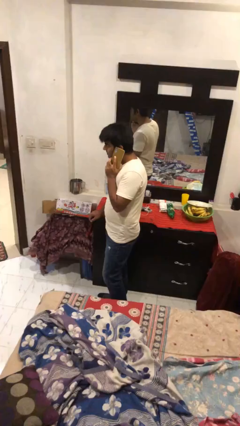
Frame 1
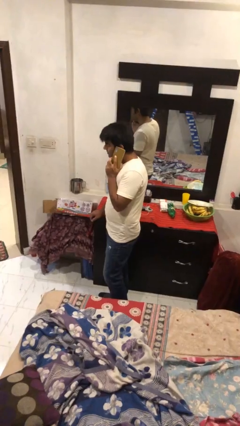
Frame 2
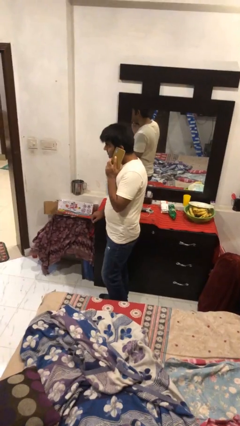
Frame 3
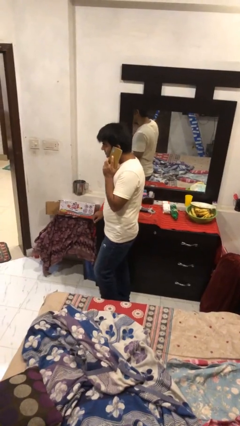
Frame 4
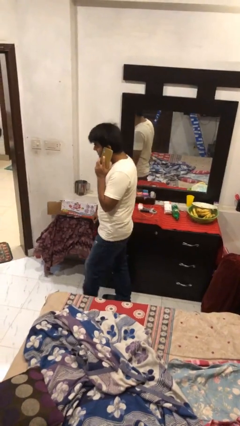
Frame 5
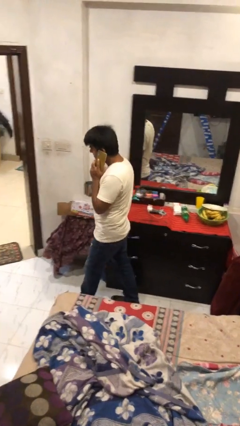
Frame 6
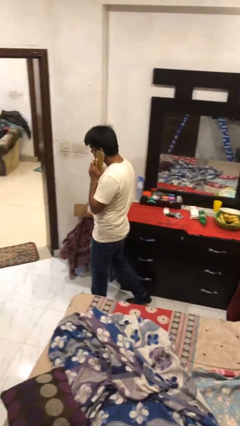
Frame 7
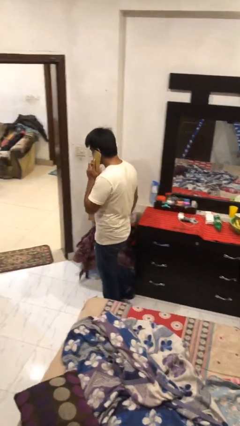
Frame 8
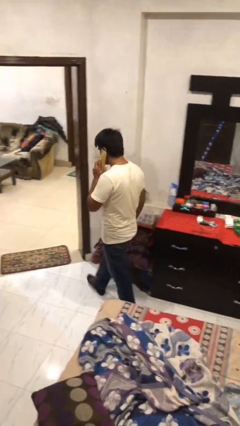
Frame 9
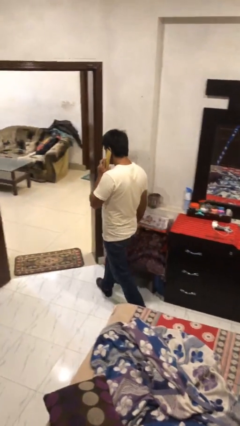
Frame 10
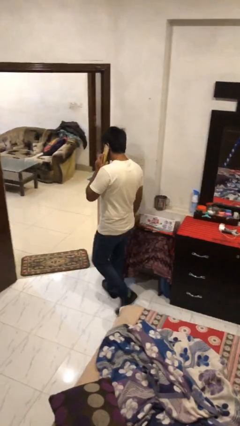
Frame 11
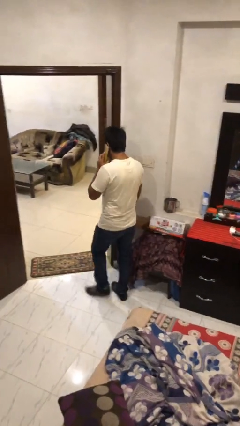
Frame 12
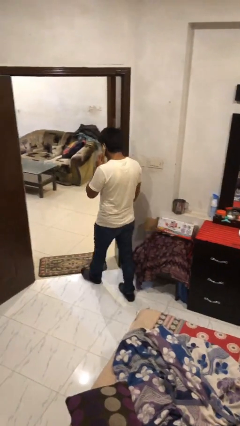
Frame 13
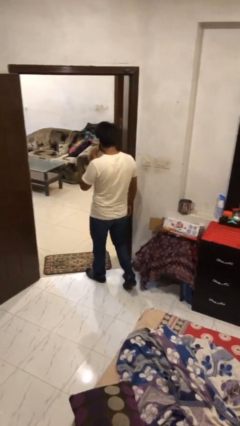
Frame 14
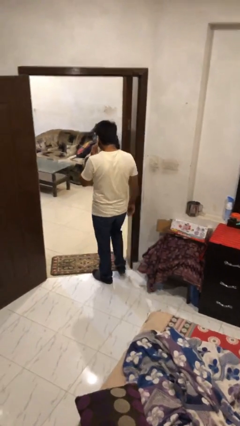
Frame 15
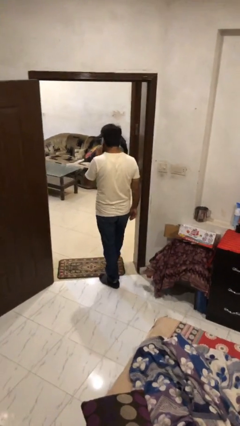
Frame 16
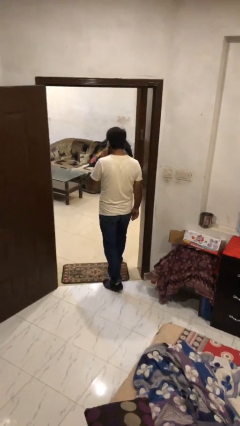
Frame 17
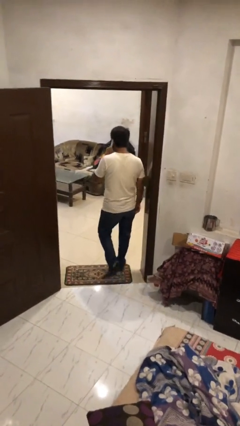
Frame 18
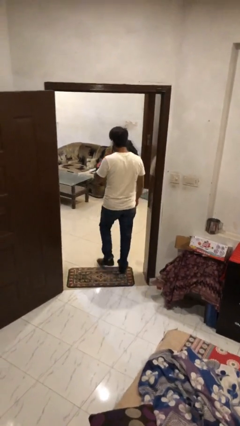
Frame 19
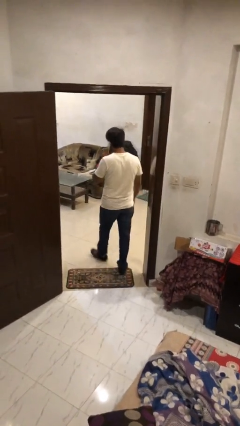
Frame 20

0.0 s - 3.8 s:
person exits scene through structure

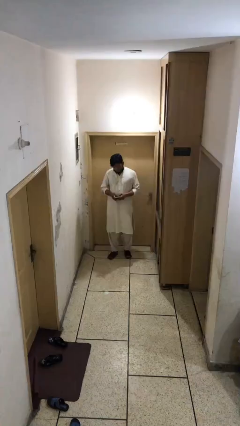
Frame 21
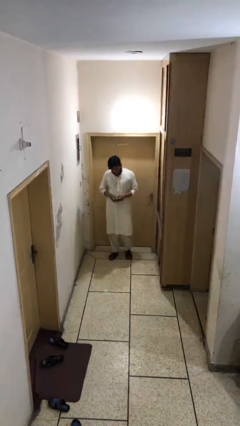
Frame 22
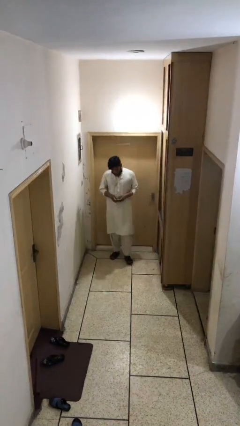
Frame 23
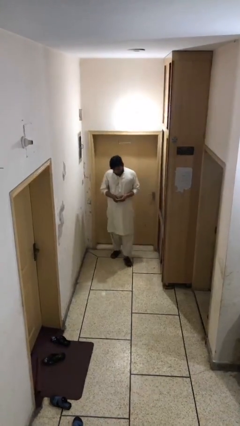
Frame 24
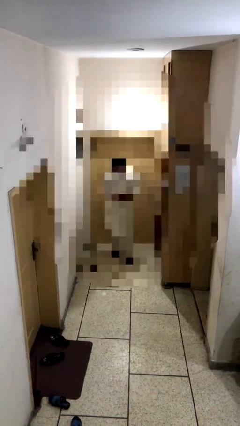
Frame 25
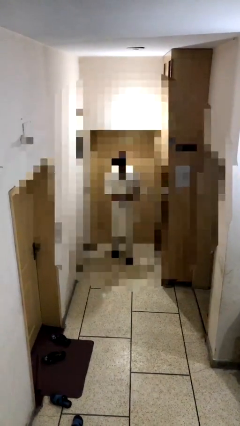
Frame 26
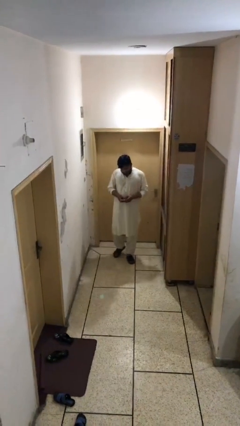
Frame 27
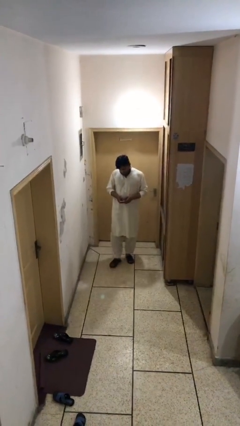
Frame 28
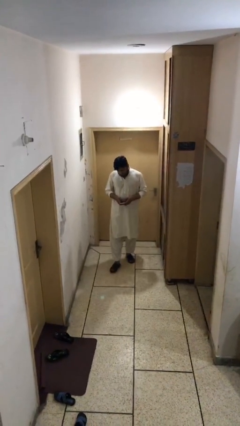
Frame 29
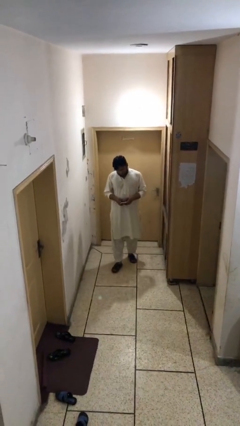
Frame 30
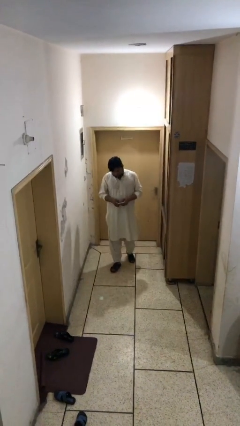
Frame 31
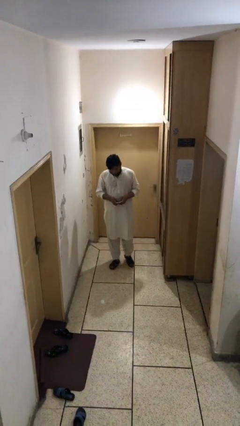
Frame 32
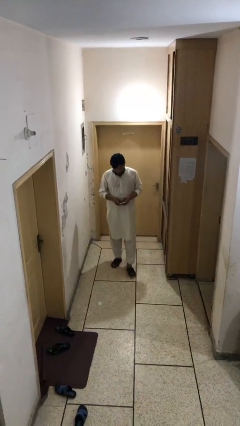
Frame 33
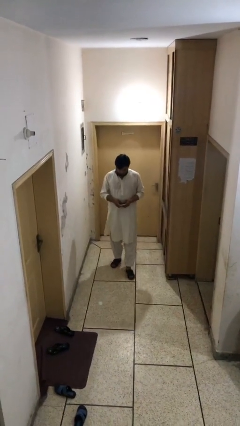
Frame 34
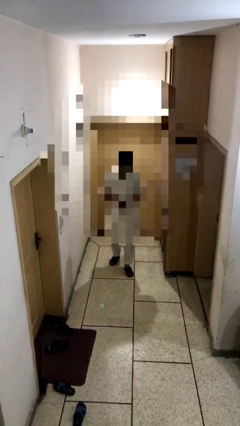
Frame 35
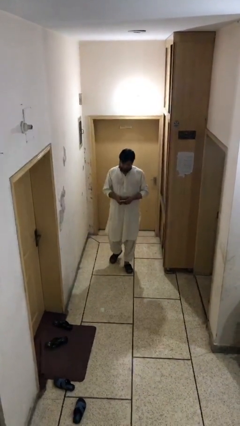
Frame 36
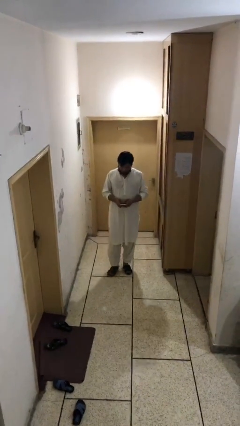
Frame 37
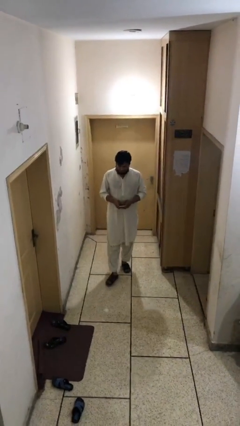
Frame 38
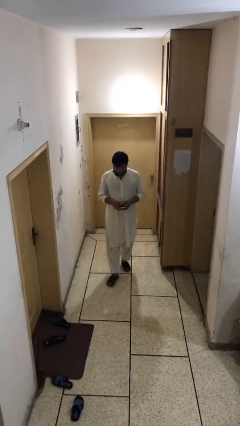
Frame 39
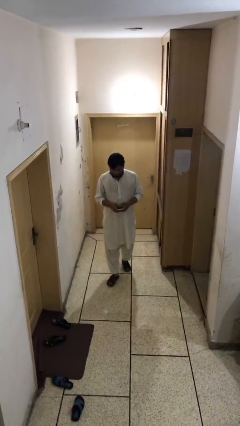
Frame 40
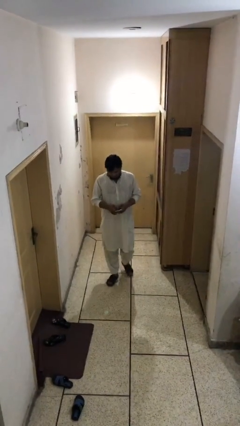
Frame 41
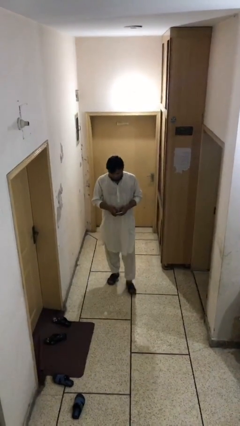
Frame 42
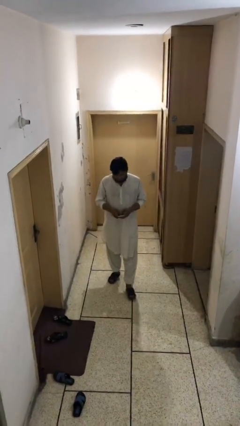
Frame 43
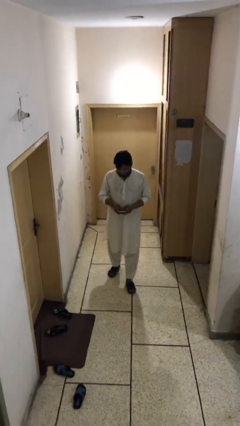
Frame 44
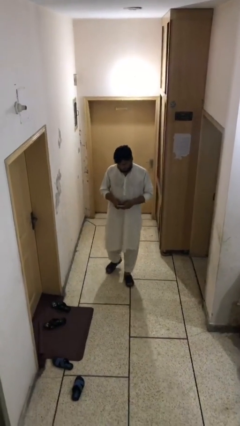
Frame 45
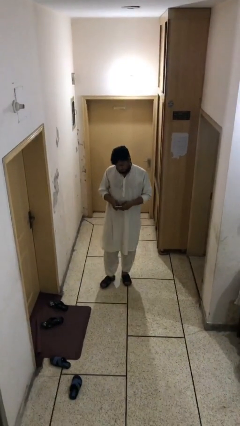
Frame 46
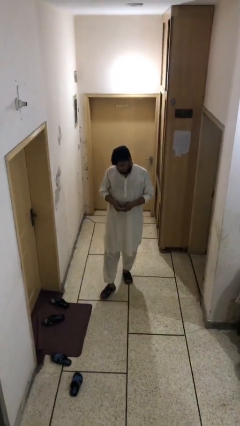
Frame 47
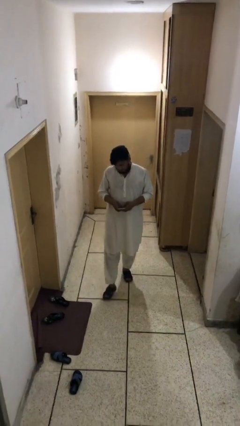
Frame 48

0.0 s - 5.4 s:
person texts on phone

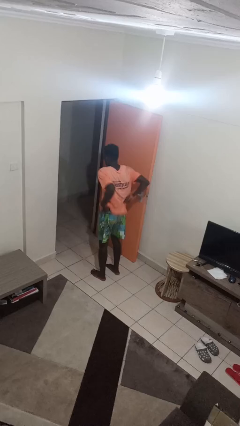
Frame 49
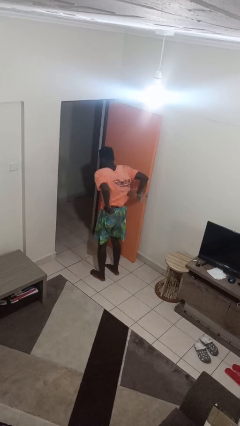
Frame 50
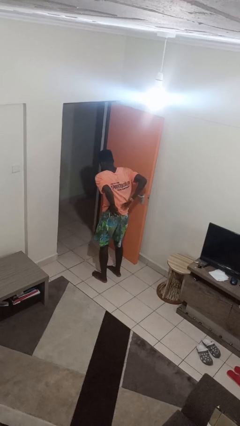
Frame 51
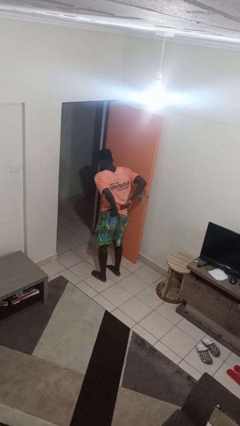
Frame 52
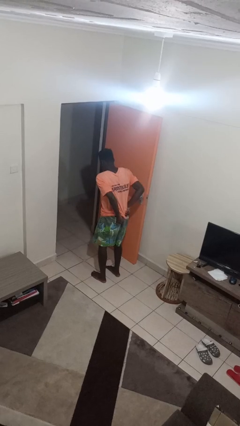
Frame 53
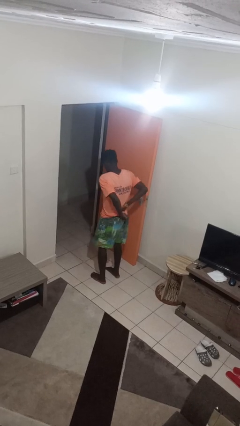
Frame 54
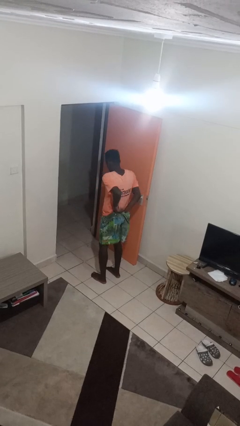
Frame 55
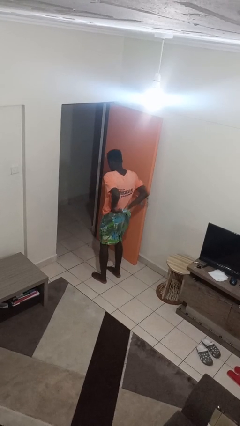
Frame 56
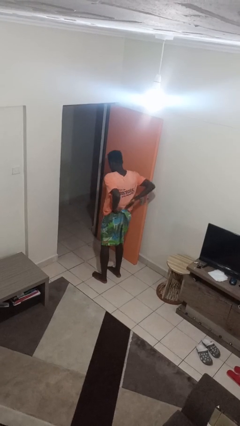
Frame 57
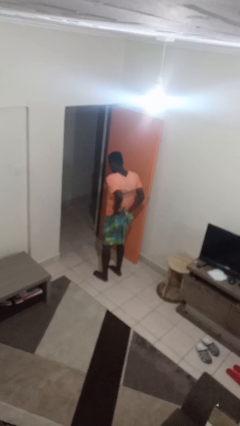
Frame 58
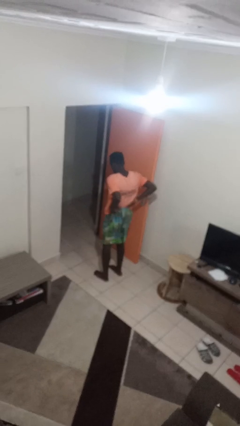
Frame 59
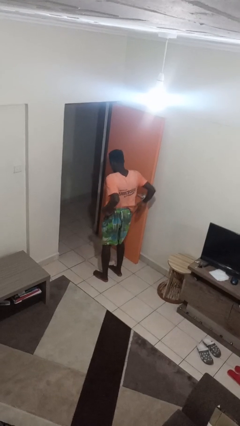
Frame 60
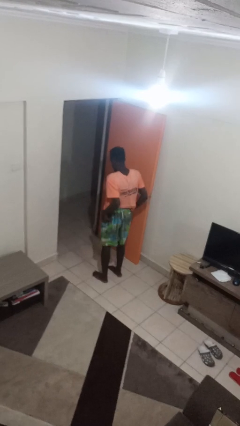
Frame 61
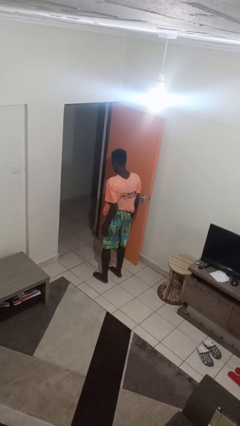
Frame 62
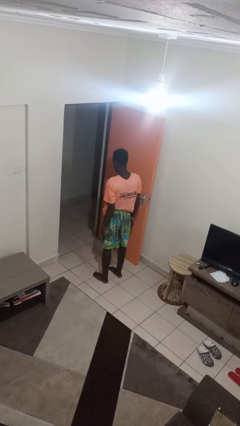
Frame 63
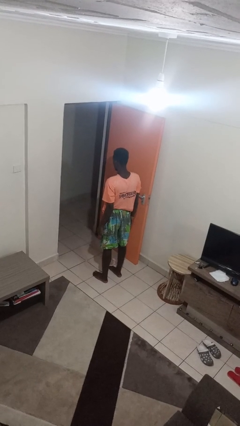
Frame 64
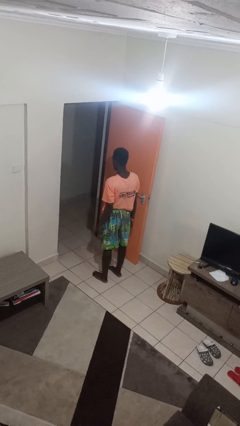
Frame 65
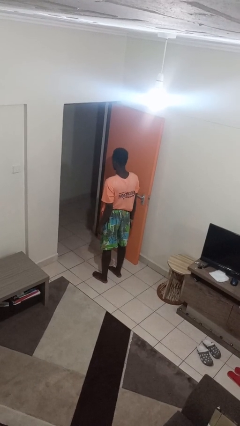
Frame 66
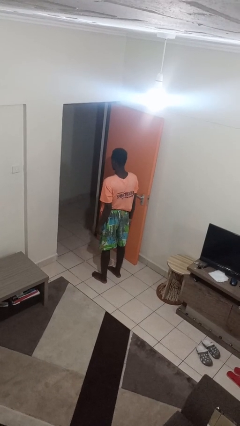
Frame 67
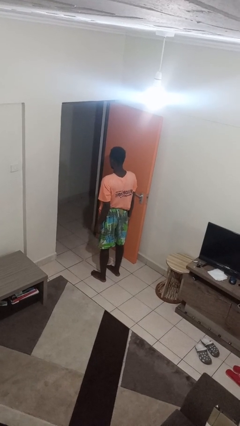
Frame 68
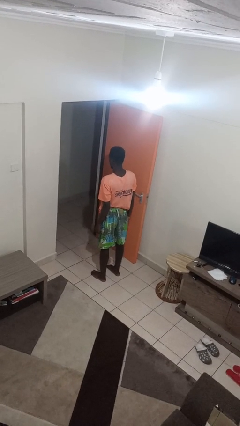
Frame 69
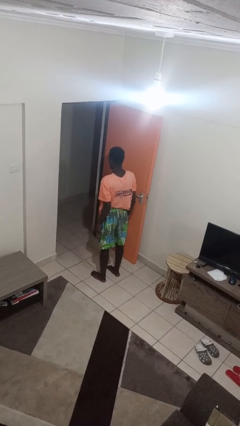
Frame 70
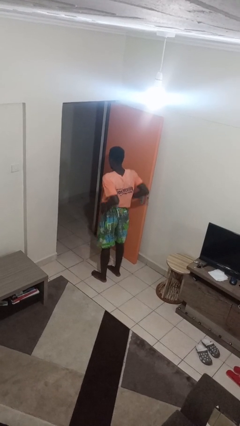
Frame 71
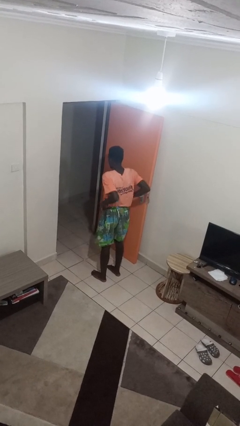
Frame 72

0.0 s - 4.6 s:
person tucks in shirt

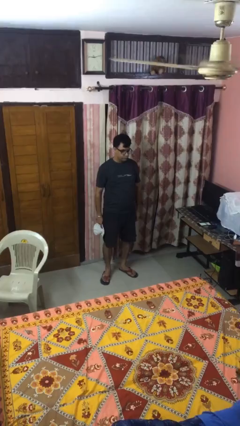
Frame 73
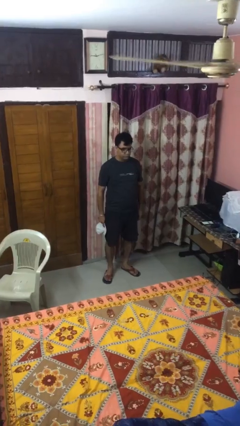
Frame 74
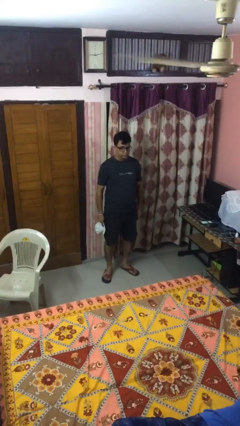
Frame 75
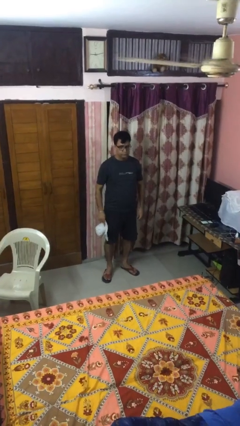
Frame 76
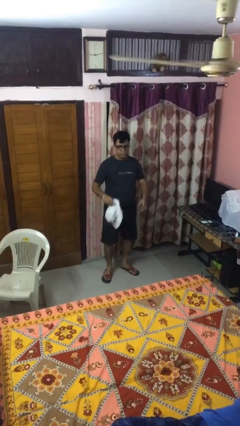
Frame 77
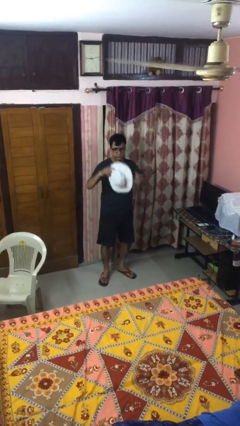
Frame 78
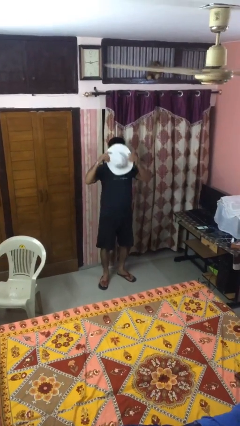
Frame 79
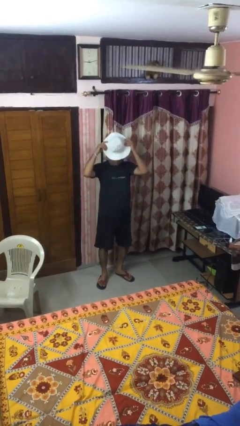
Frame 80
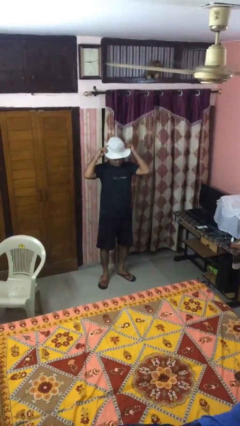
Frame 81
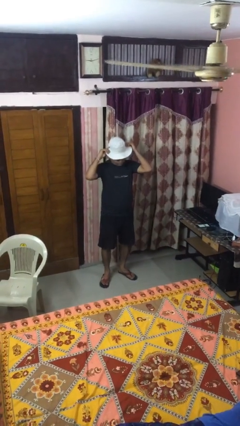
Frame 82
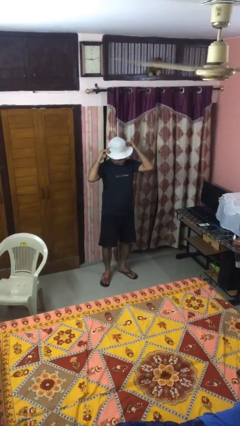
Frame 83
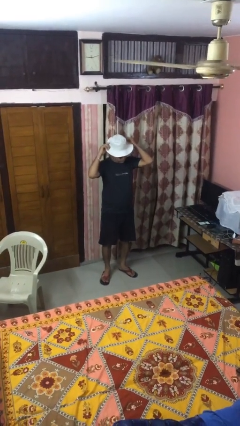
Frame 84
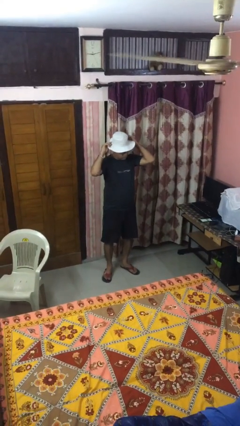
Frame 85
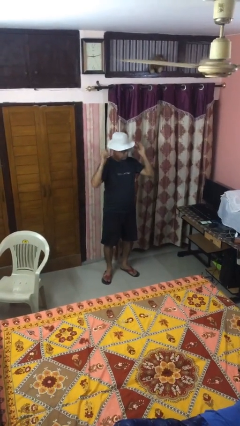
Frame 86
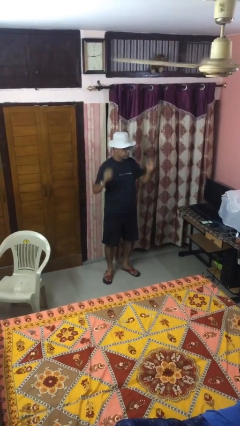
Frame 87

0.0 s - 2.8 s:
person puts on hat

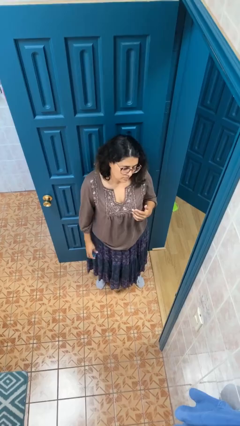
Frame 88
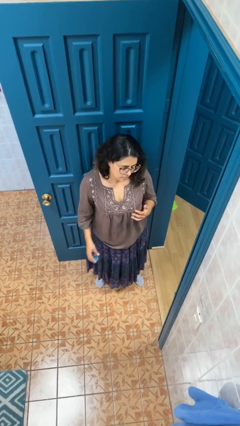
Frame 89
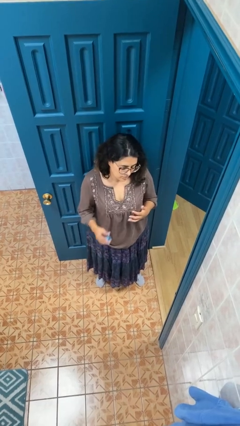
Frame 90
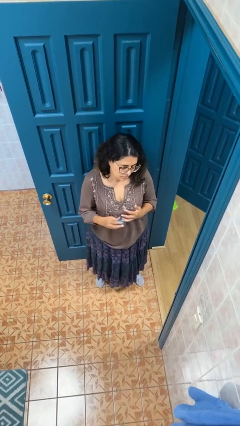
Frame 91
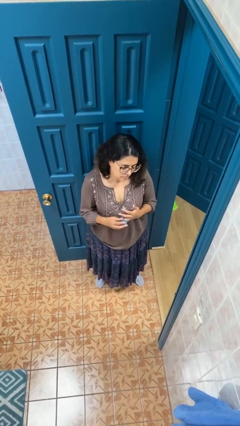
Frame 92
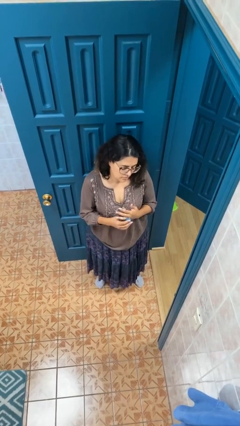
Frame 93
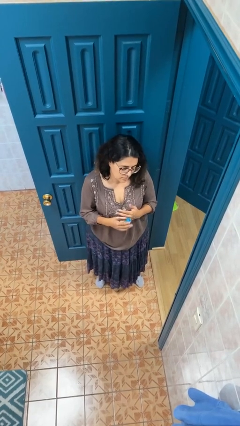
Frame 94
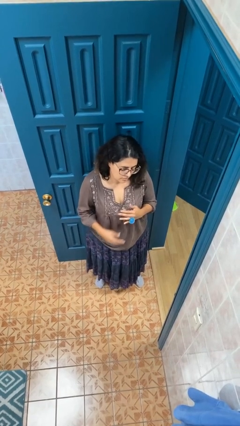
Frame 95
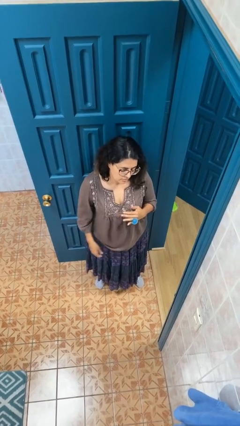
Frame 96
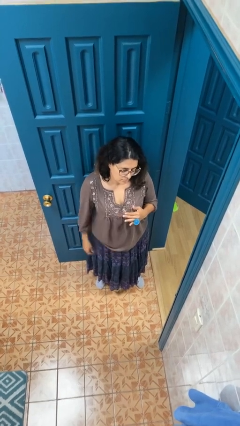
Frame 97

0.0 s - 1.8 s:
person puts on ring
